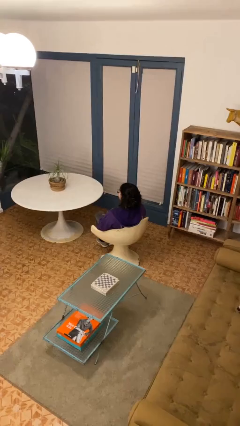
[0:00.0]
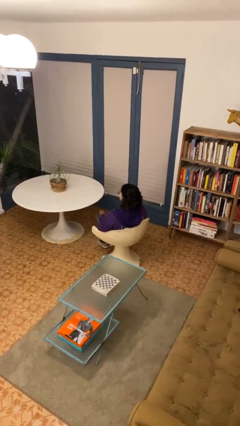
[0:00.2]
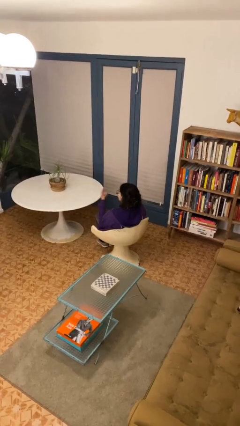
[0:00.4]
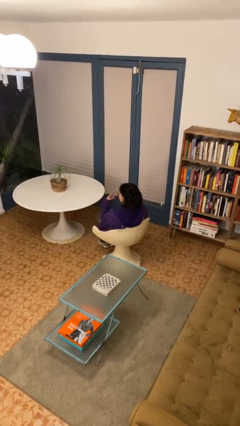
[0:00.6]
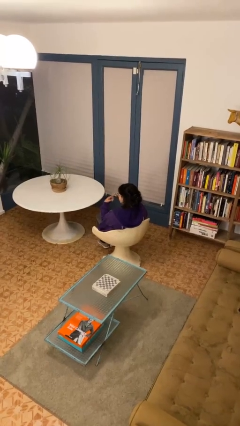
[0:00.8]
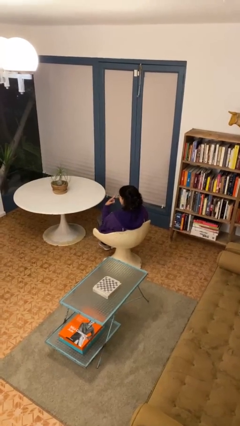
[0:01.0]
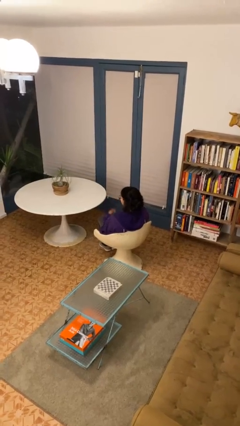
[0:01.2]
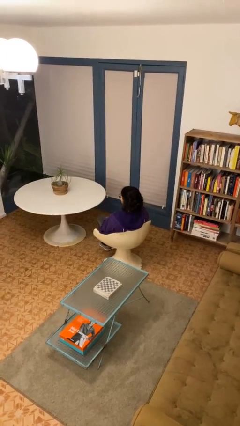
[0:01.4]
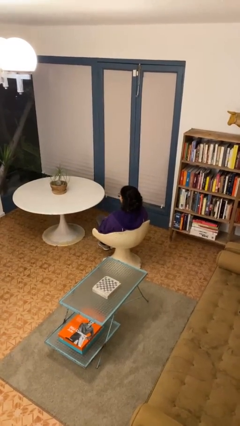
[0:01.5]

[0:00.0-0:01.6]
person gestures watch closely

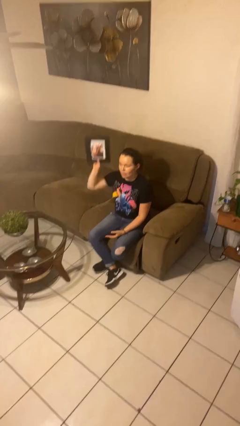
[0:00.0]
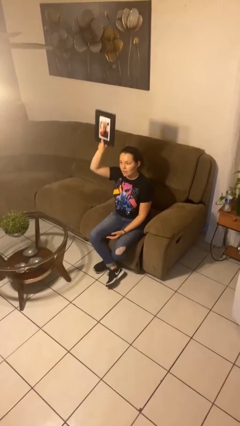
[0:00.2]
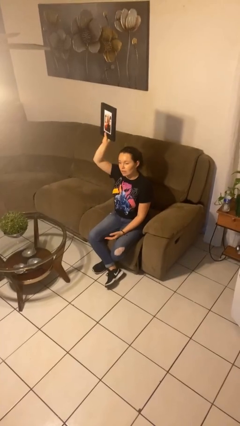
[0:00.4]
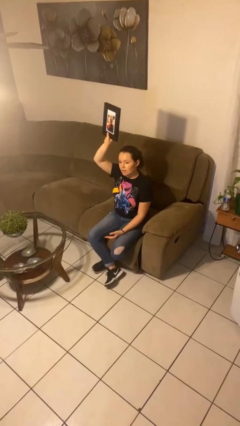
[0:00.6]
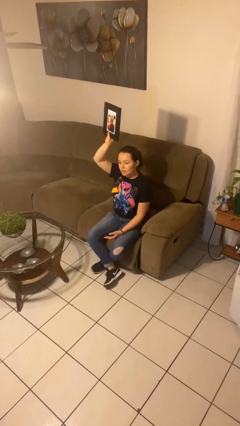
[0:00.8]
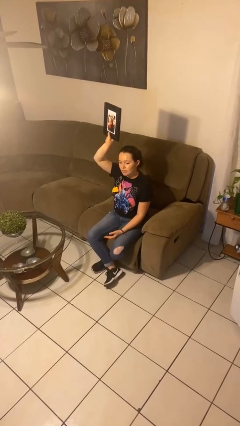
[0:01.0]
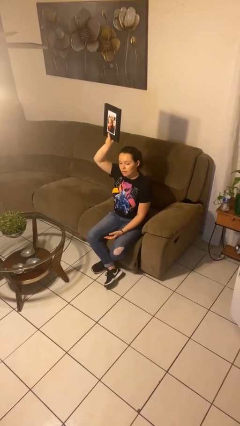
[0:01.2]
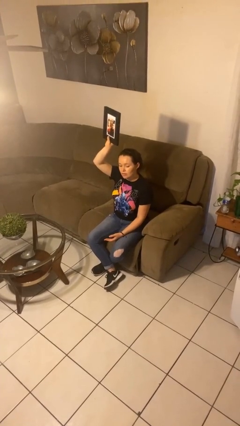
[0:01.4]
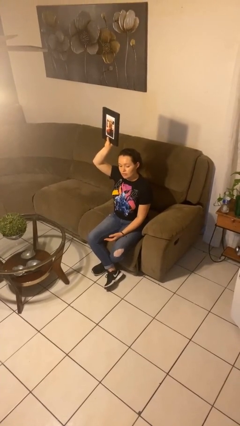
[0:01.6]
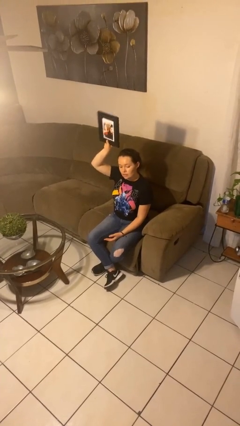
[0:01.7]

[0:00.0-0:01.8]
person holds object above head

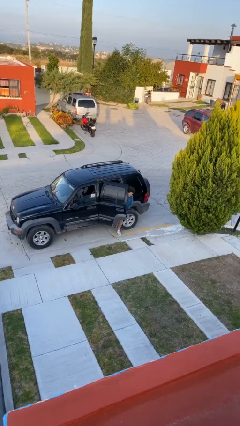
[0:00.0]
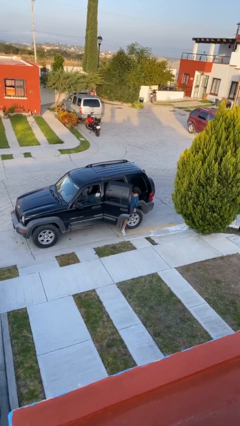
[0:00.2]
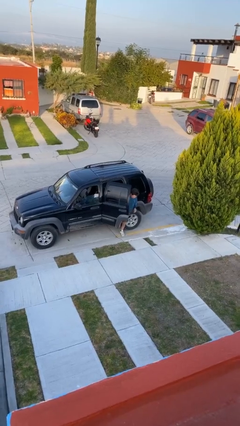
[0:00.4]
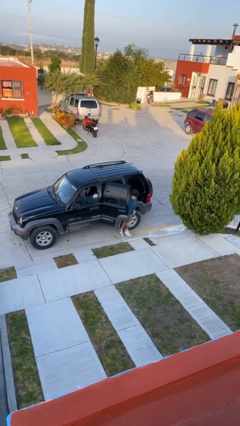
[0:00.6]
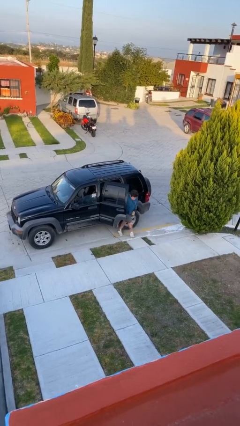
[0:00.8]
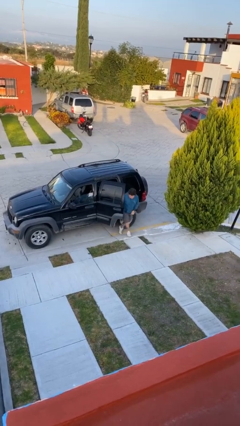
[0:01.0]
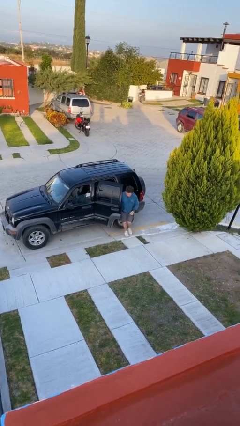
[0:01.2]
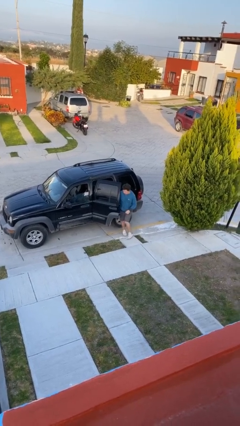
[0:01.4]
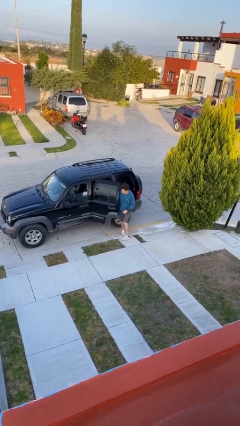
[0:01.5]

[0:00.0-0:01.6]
person exits car

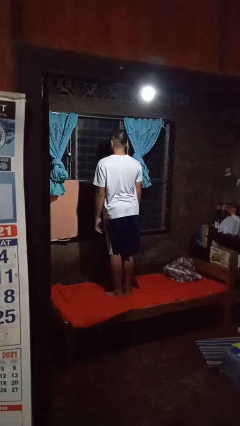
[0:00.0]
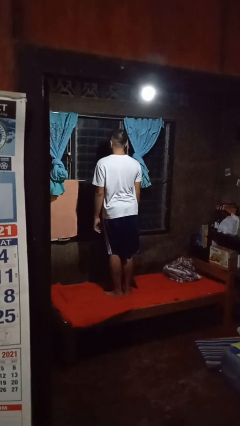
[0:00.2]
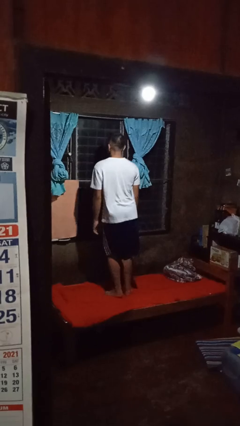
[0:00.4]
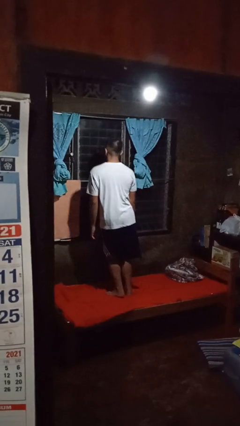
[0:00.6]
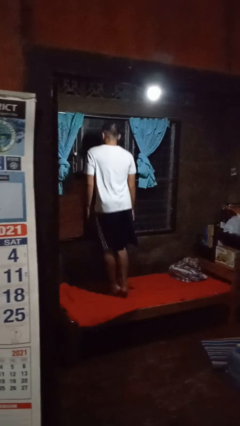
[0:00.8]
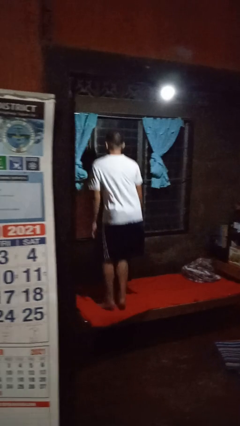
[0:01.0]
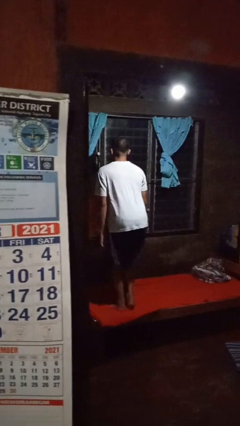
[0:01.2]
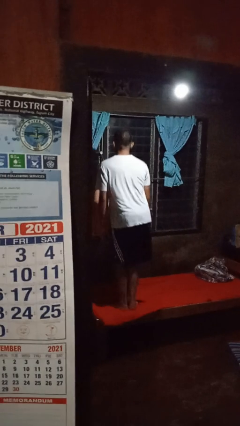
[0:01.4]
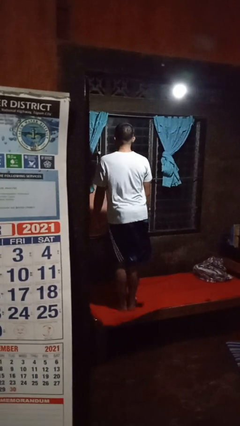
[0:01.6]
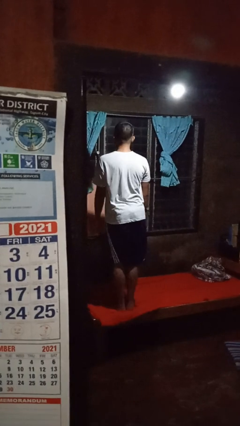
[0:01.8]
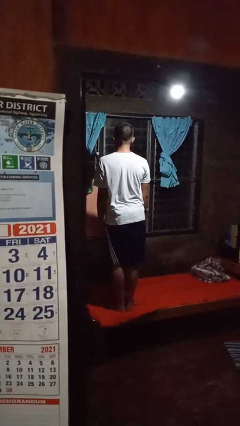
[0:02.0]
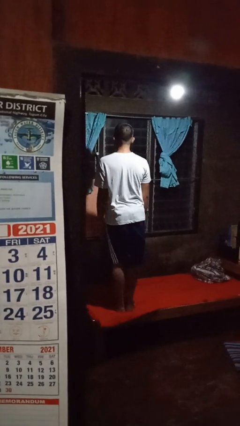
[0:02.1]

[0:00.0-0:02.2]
person jumps on bed

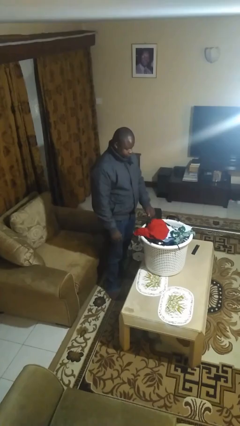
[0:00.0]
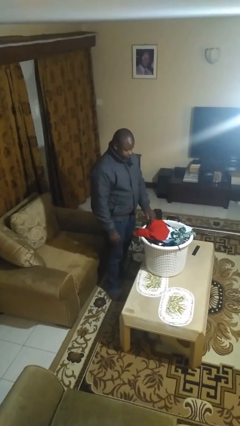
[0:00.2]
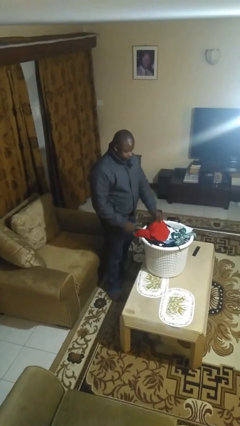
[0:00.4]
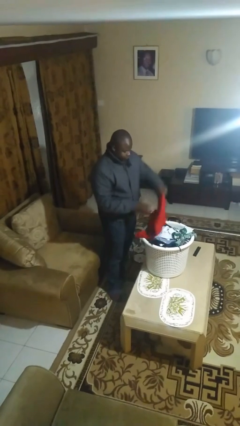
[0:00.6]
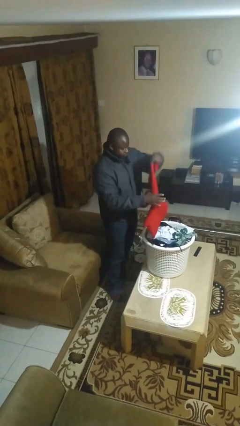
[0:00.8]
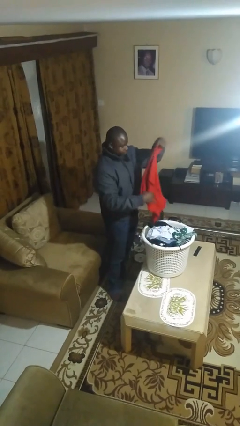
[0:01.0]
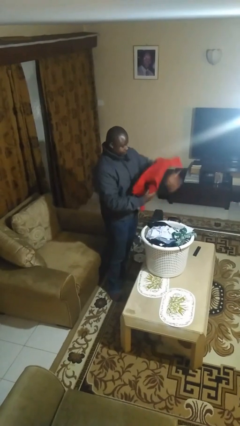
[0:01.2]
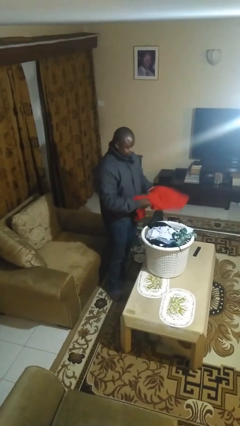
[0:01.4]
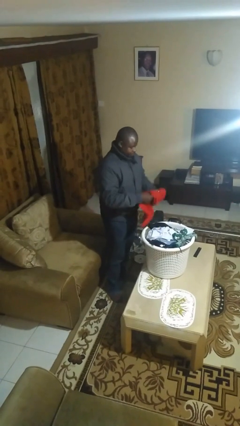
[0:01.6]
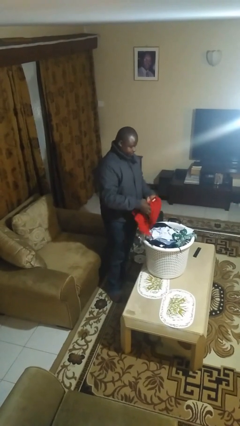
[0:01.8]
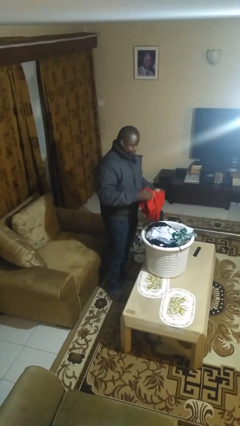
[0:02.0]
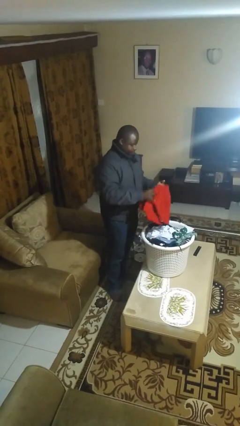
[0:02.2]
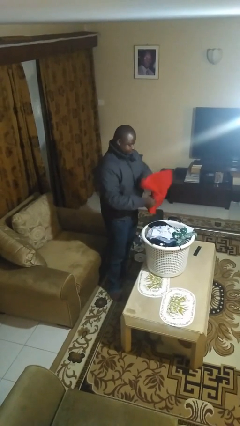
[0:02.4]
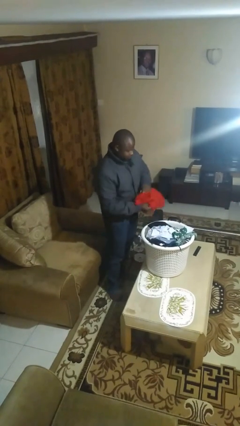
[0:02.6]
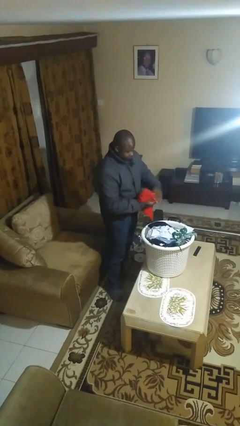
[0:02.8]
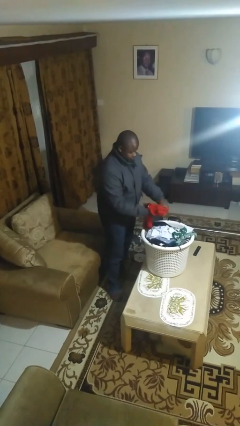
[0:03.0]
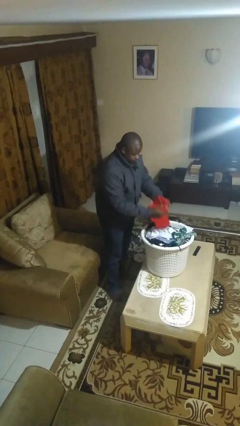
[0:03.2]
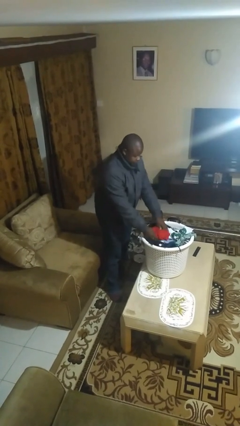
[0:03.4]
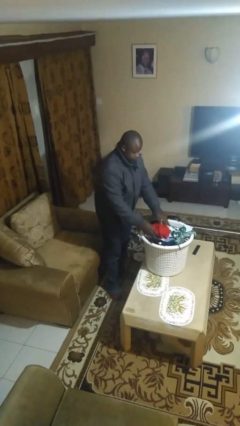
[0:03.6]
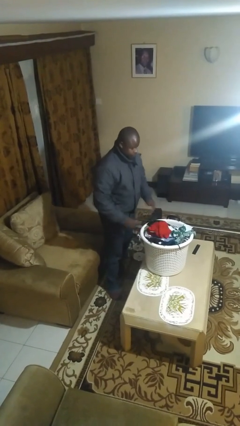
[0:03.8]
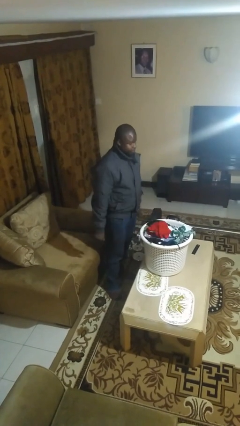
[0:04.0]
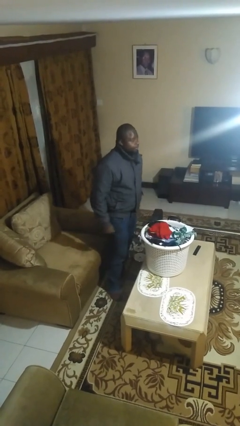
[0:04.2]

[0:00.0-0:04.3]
person folds shirt

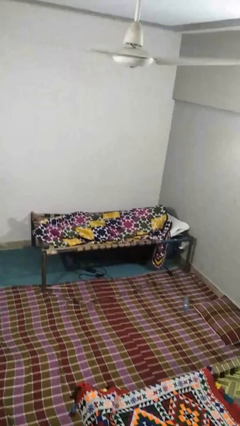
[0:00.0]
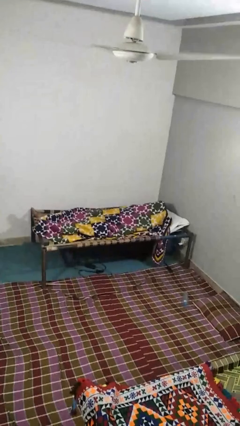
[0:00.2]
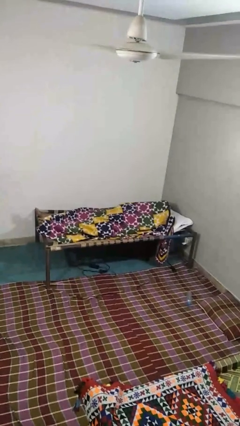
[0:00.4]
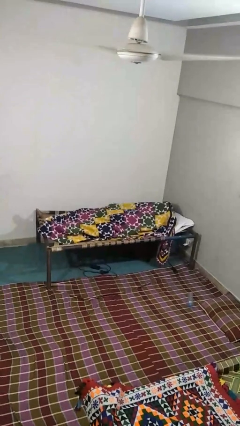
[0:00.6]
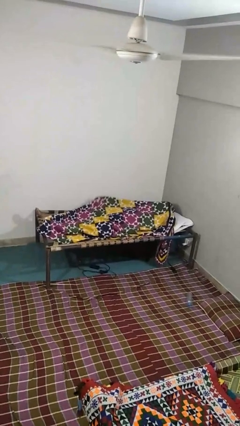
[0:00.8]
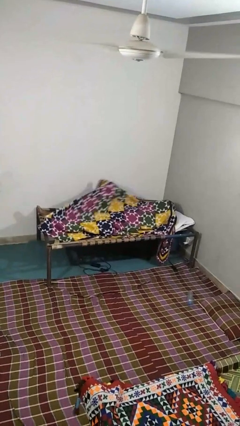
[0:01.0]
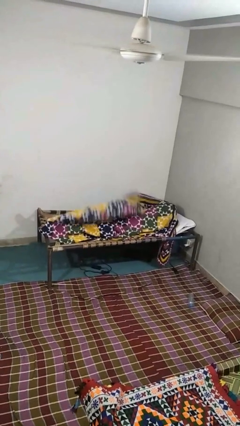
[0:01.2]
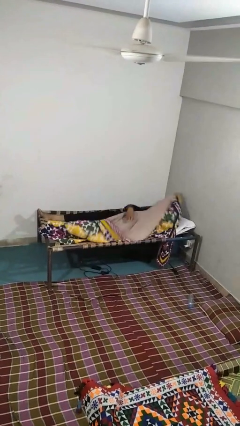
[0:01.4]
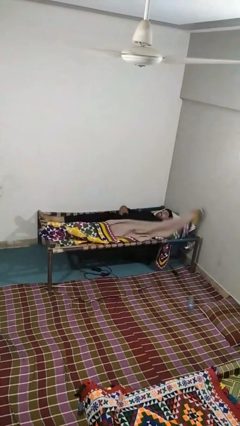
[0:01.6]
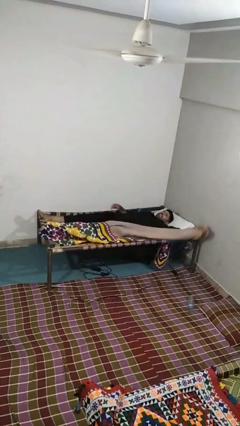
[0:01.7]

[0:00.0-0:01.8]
person uncovers with blanket

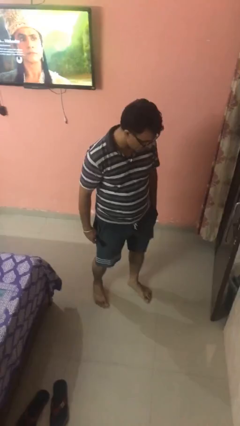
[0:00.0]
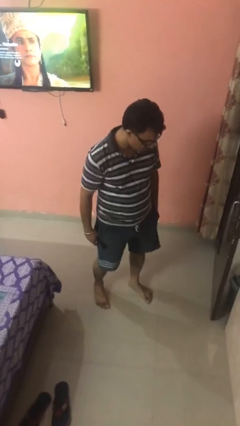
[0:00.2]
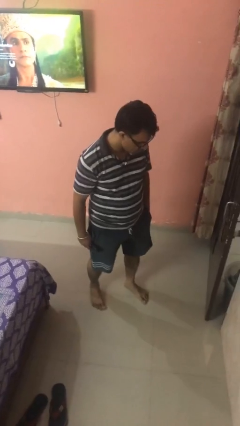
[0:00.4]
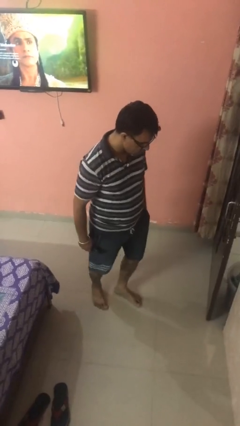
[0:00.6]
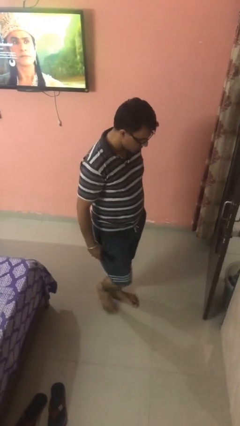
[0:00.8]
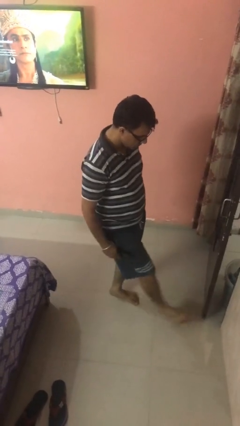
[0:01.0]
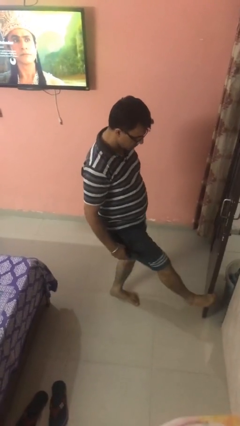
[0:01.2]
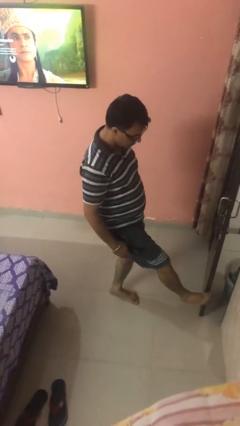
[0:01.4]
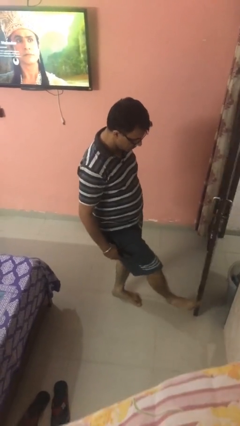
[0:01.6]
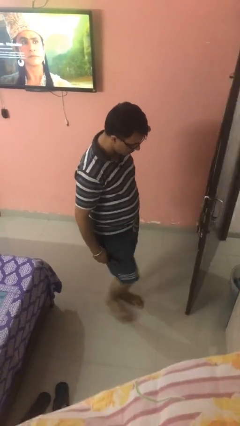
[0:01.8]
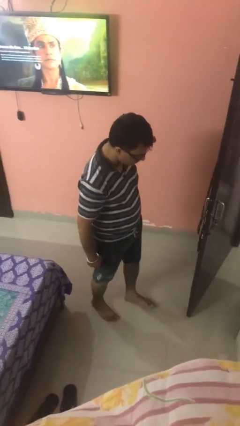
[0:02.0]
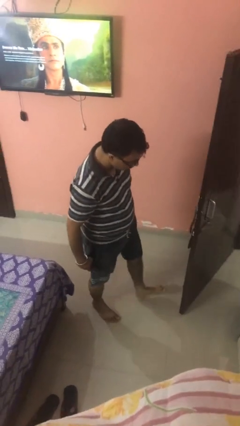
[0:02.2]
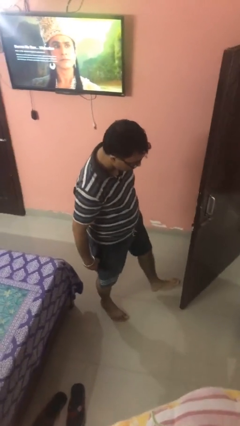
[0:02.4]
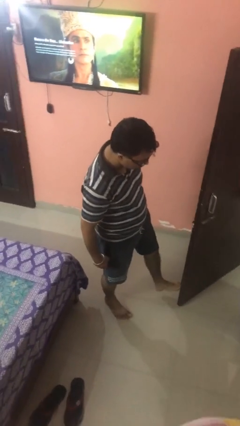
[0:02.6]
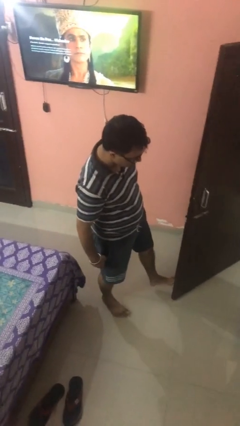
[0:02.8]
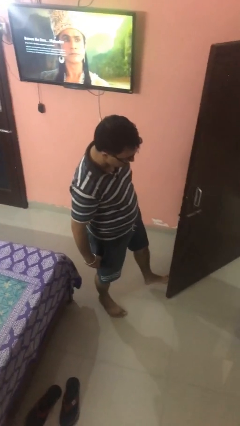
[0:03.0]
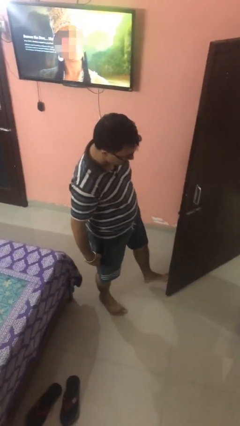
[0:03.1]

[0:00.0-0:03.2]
person opens facility door
